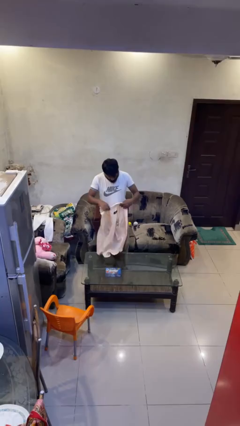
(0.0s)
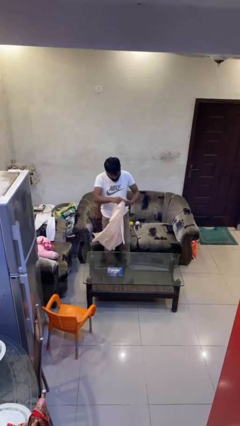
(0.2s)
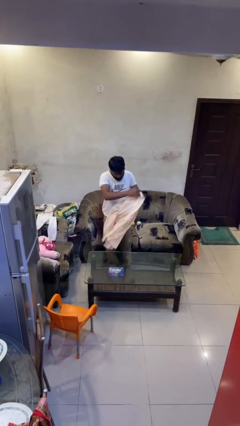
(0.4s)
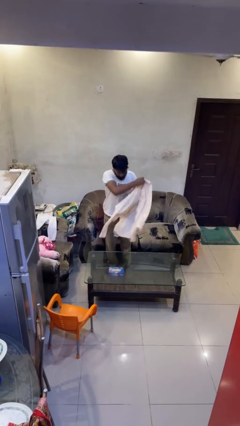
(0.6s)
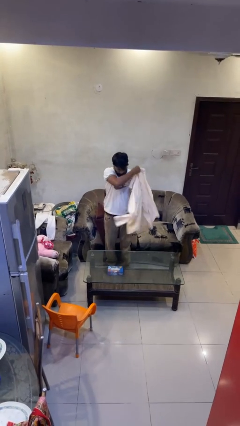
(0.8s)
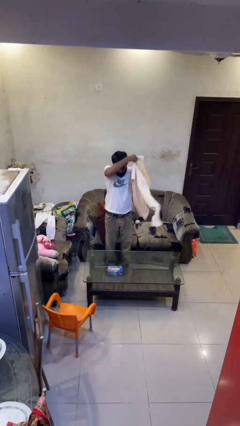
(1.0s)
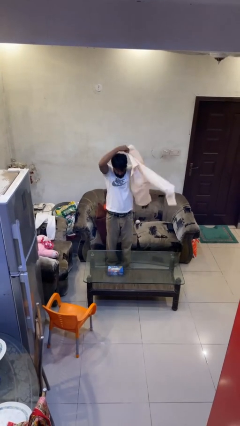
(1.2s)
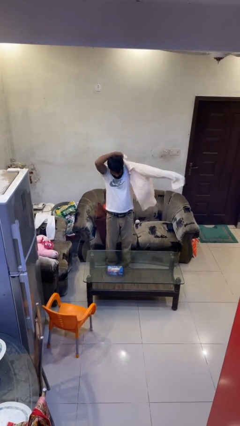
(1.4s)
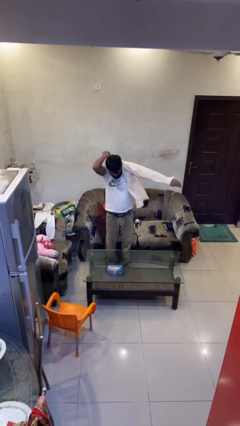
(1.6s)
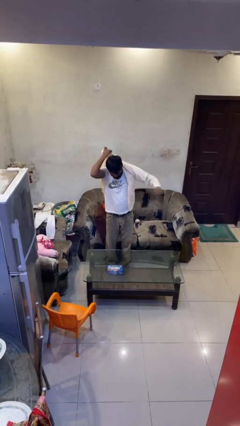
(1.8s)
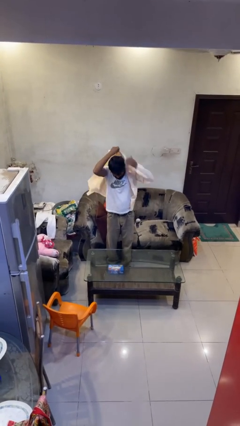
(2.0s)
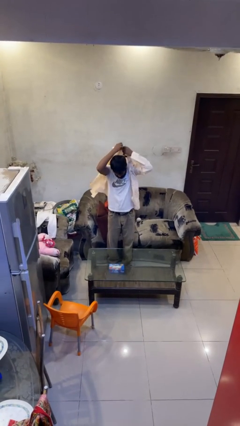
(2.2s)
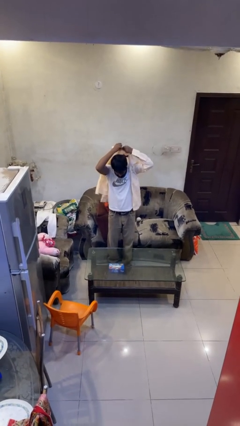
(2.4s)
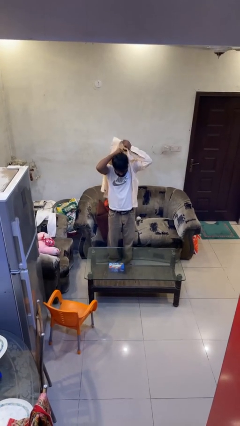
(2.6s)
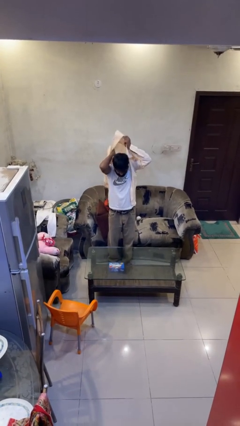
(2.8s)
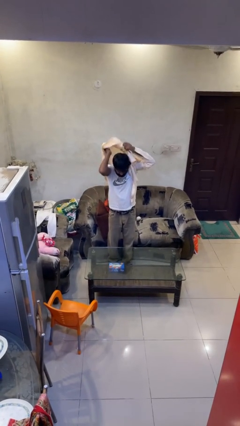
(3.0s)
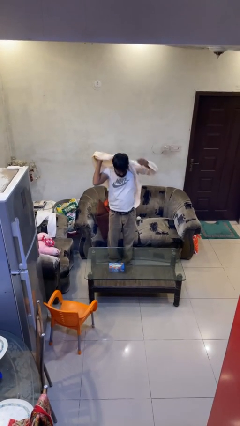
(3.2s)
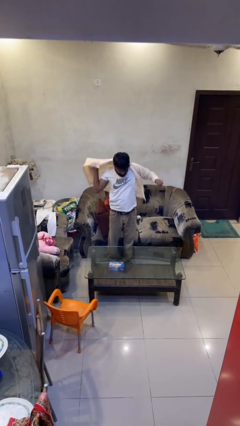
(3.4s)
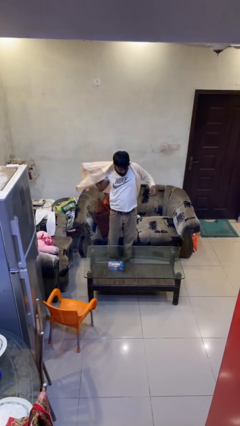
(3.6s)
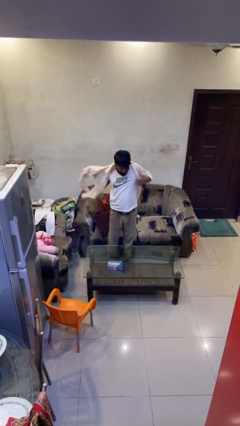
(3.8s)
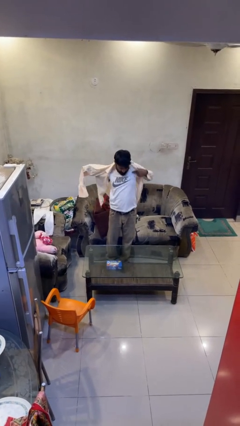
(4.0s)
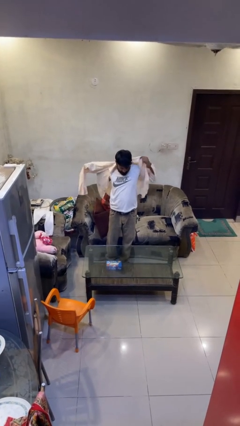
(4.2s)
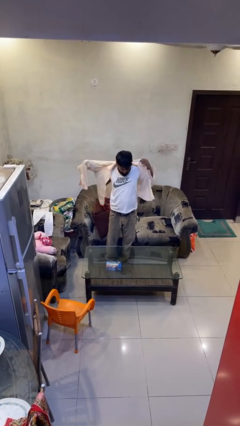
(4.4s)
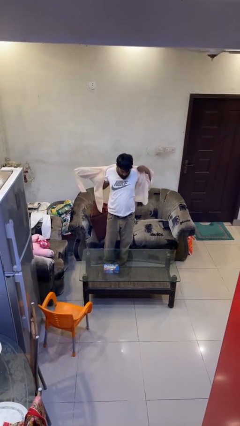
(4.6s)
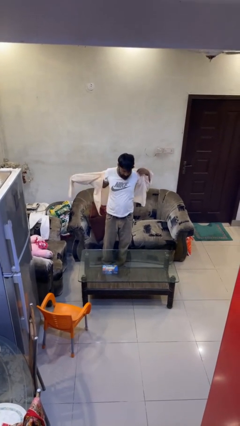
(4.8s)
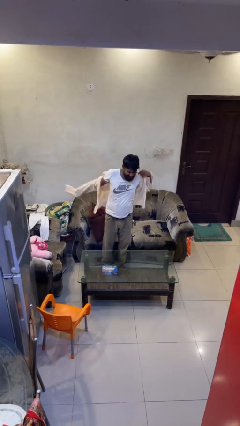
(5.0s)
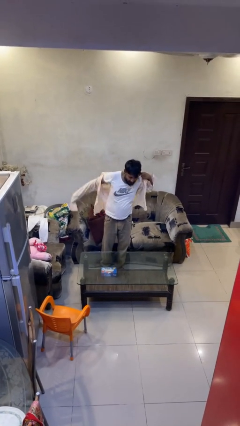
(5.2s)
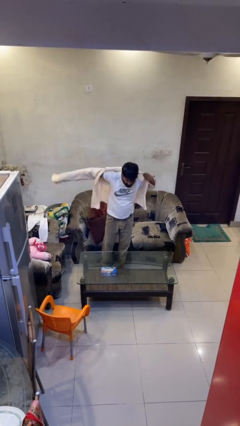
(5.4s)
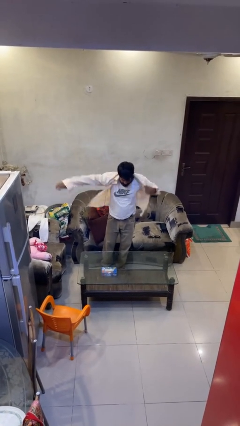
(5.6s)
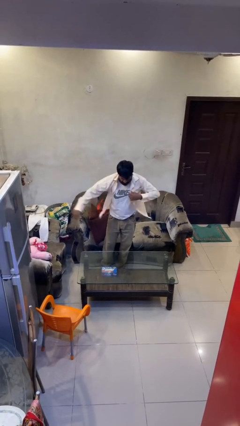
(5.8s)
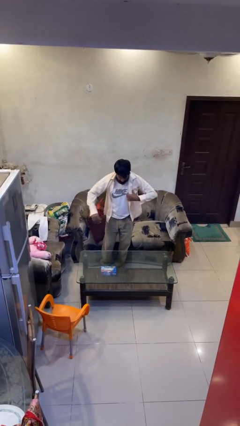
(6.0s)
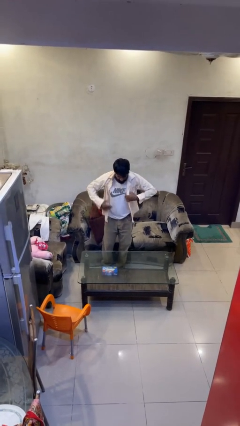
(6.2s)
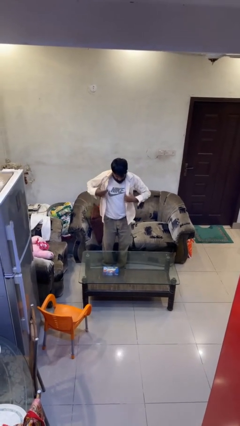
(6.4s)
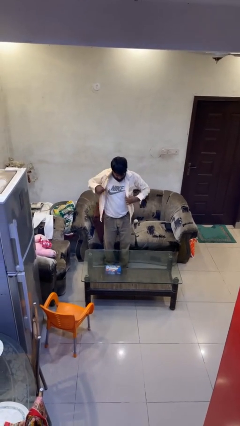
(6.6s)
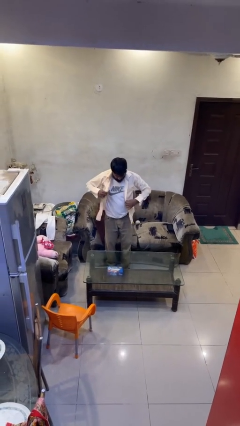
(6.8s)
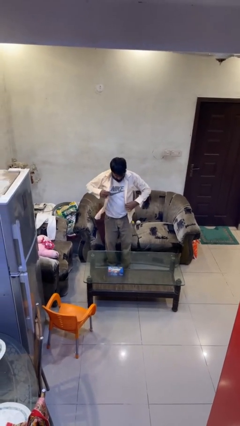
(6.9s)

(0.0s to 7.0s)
person puts on shirt

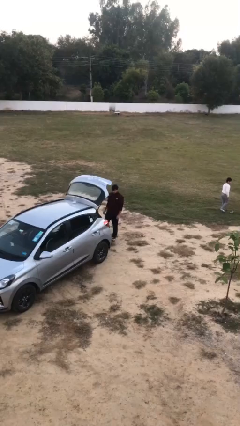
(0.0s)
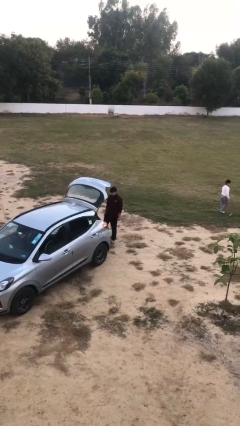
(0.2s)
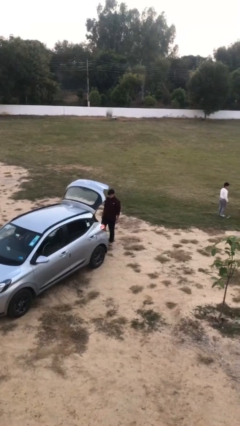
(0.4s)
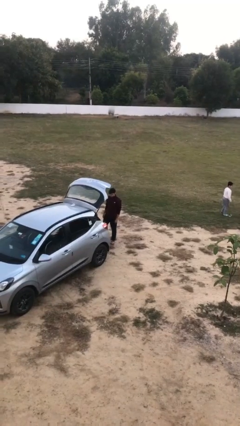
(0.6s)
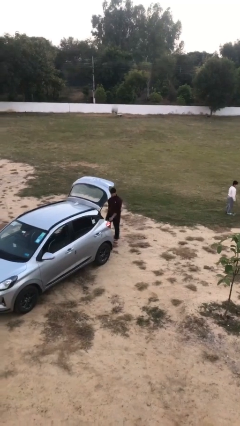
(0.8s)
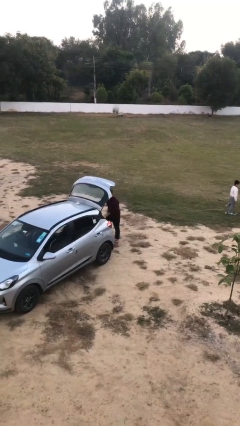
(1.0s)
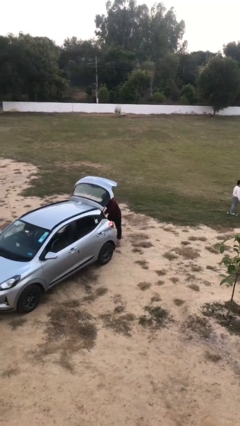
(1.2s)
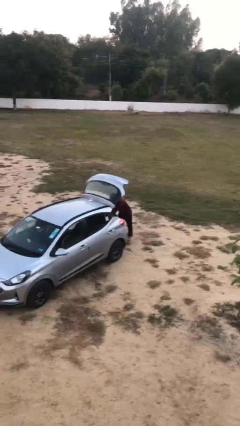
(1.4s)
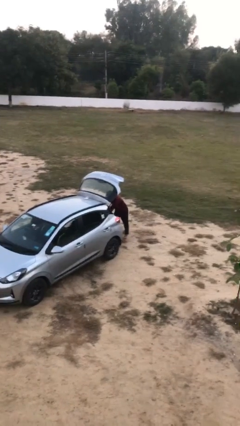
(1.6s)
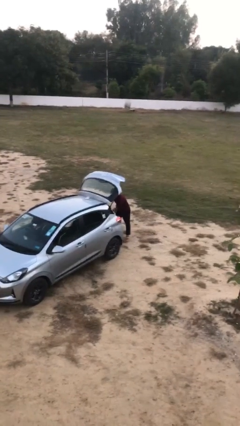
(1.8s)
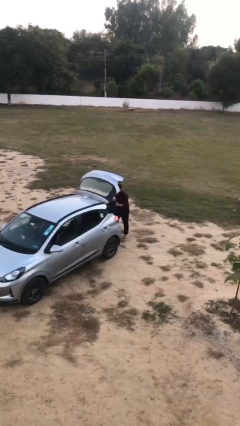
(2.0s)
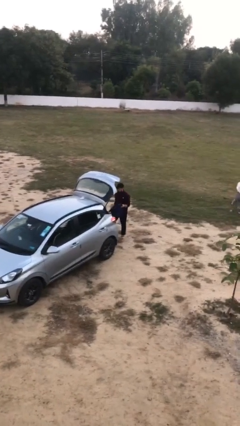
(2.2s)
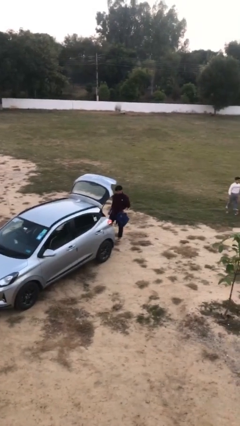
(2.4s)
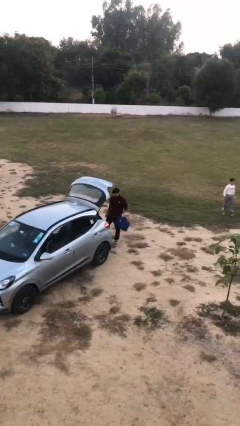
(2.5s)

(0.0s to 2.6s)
person unloads car

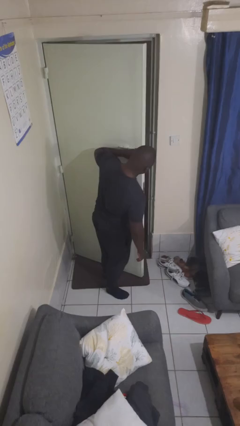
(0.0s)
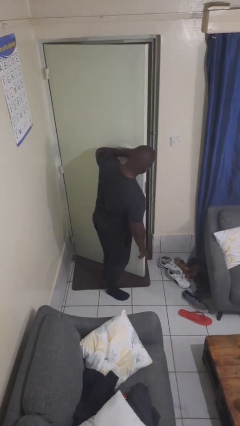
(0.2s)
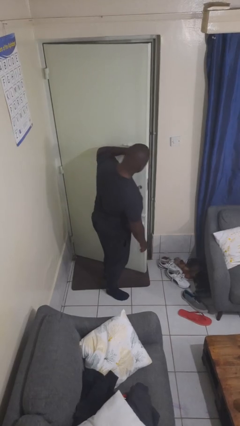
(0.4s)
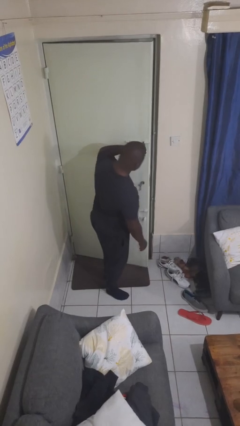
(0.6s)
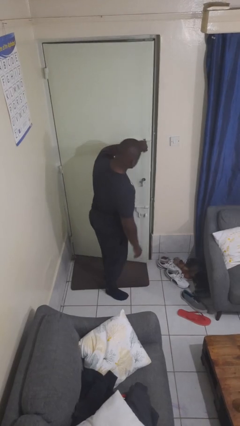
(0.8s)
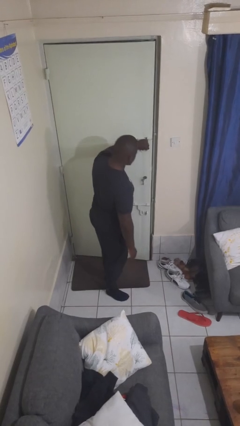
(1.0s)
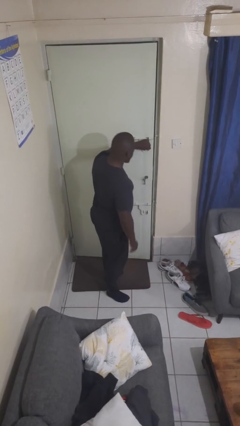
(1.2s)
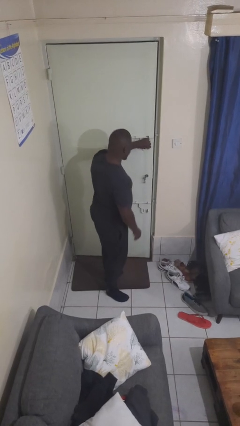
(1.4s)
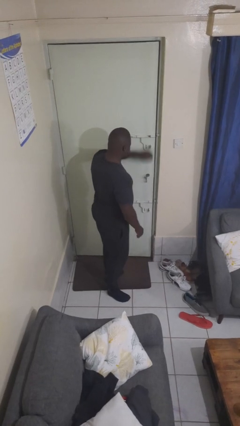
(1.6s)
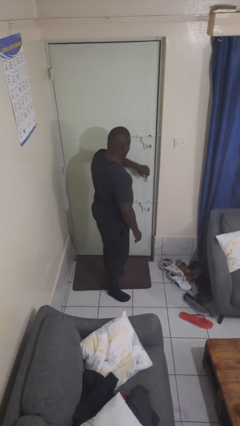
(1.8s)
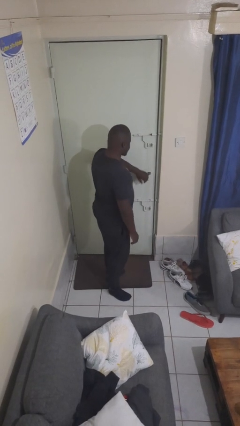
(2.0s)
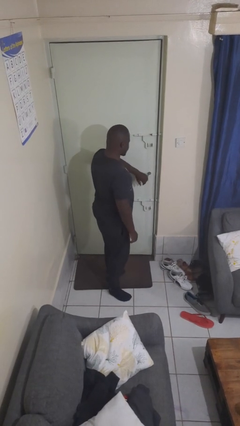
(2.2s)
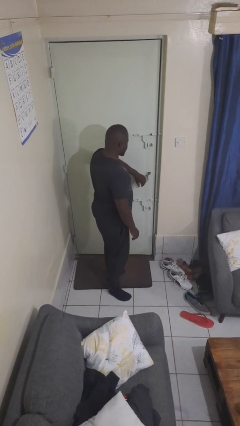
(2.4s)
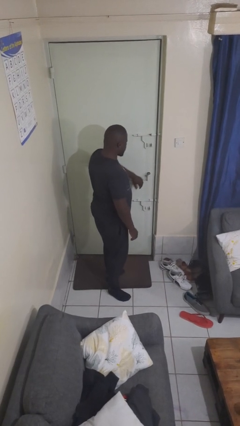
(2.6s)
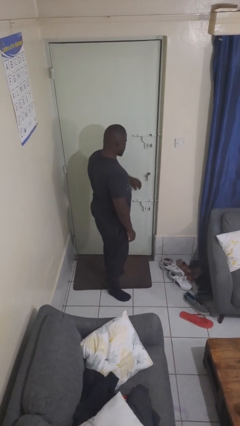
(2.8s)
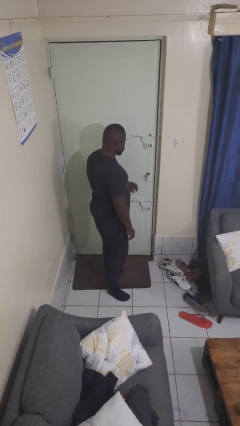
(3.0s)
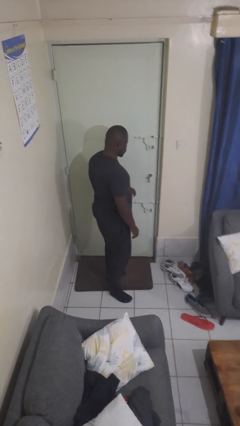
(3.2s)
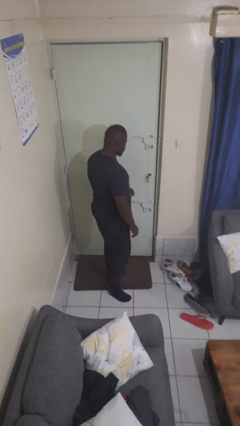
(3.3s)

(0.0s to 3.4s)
person closes facility door

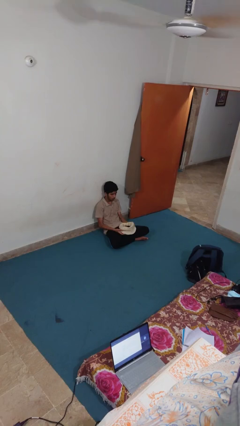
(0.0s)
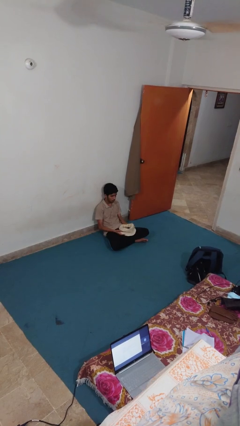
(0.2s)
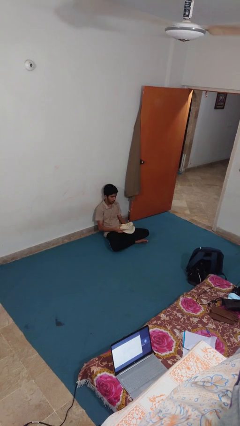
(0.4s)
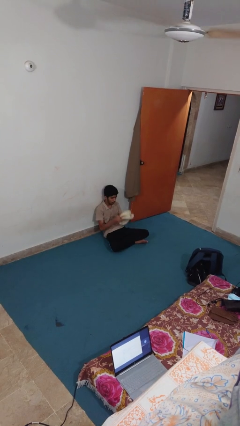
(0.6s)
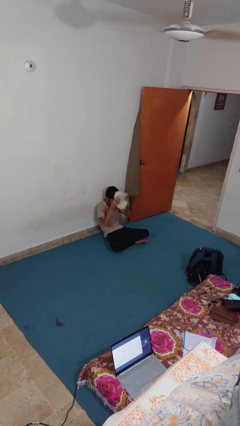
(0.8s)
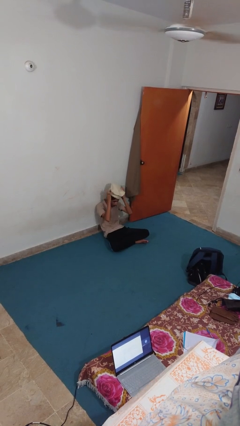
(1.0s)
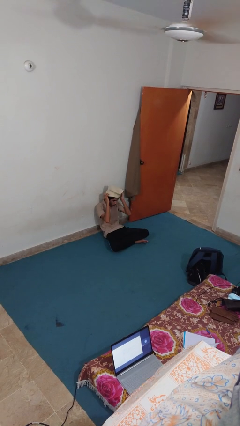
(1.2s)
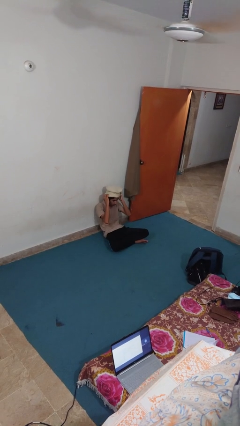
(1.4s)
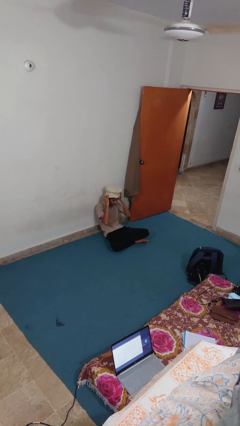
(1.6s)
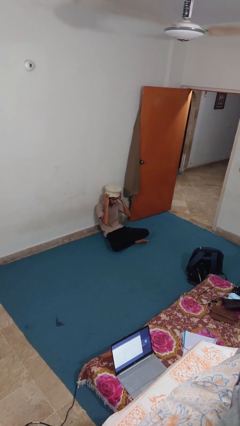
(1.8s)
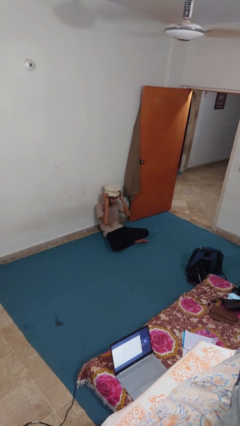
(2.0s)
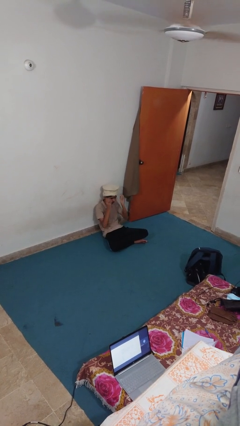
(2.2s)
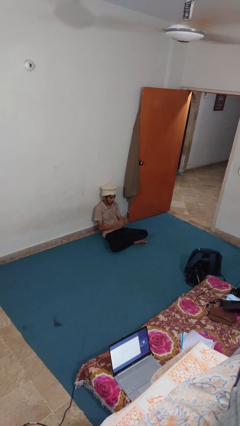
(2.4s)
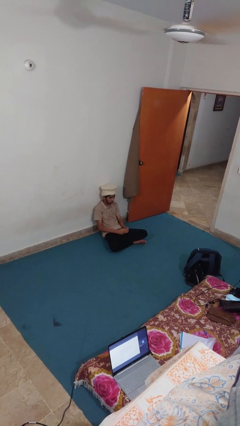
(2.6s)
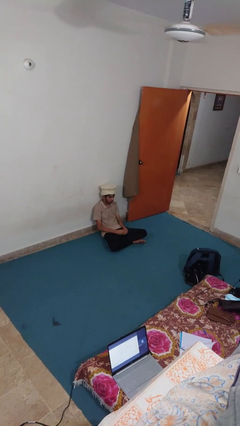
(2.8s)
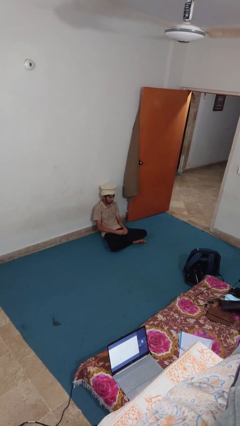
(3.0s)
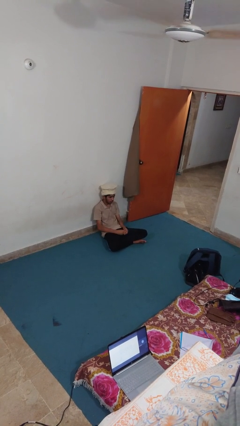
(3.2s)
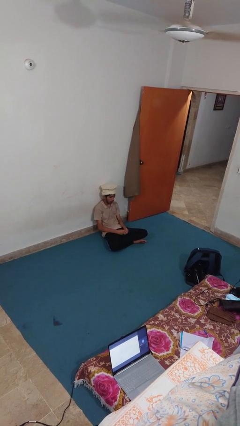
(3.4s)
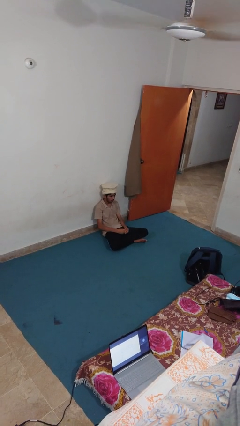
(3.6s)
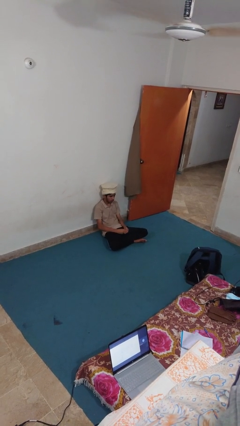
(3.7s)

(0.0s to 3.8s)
person puts on hat

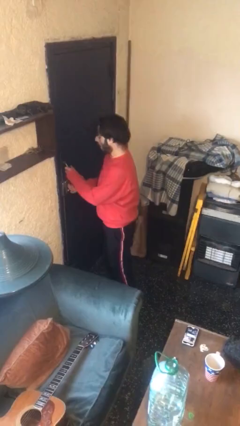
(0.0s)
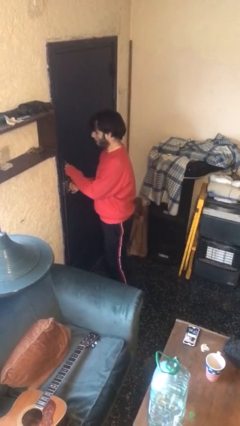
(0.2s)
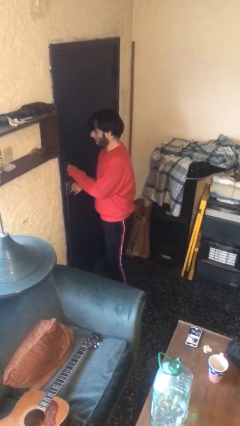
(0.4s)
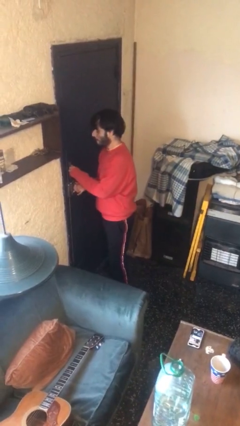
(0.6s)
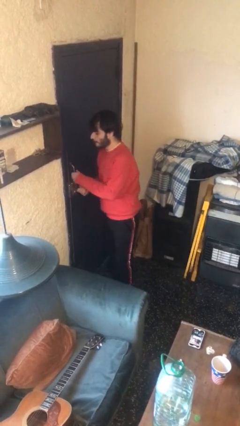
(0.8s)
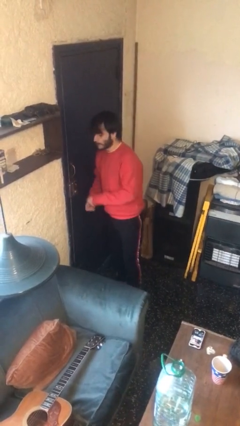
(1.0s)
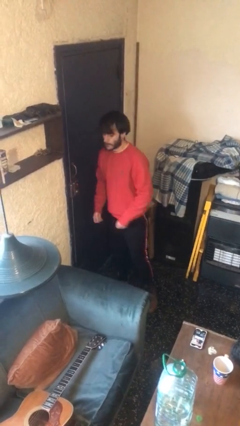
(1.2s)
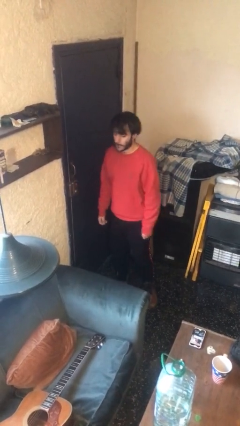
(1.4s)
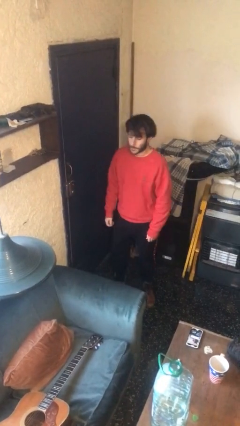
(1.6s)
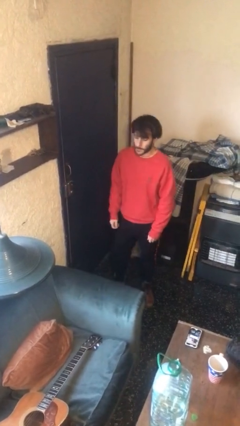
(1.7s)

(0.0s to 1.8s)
person locks door with keys
